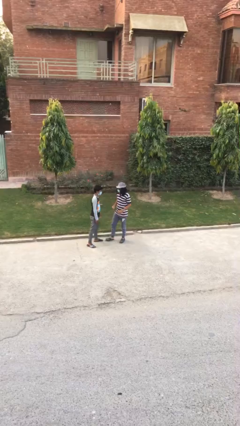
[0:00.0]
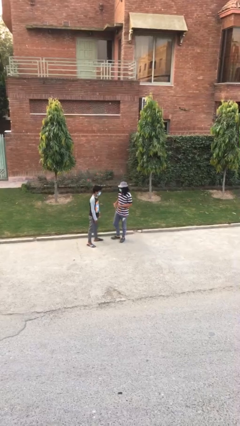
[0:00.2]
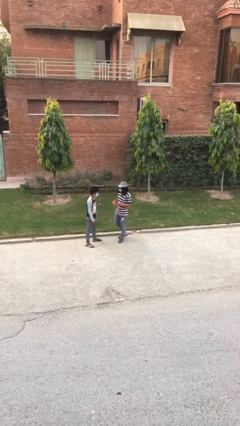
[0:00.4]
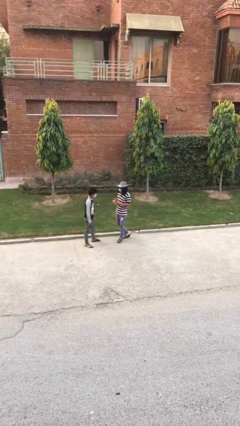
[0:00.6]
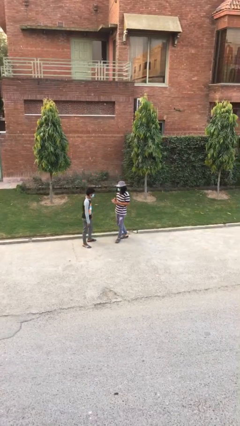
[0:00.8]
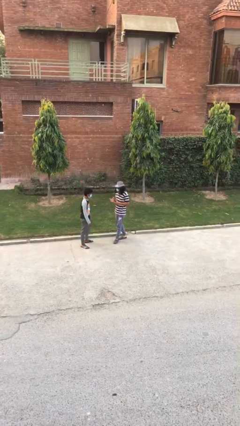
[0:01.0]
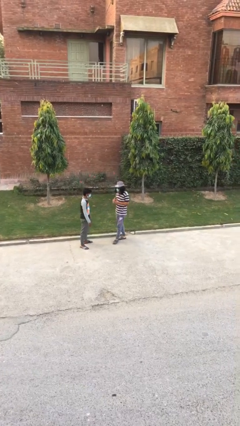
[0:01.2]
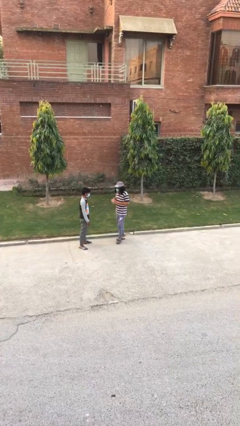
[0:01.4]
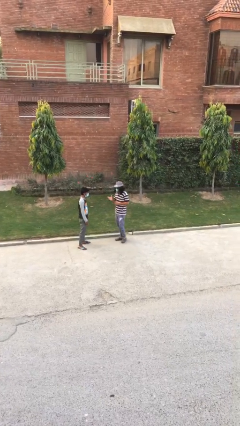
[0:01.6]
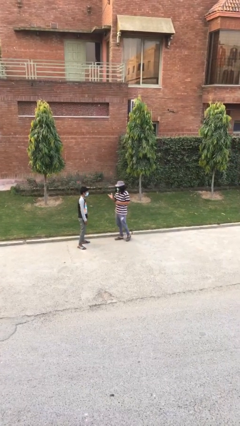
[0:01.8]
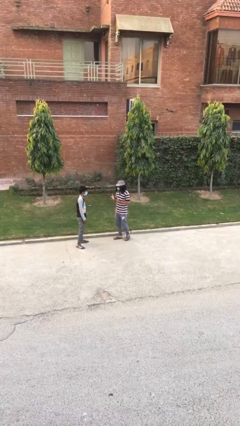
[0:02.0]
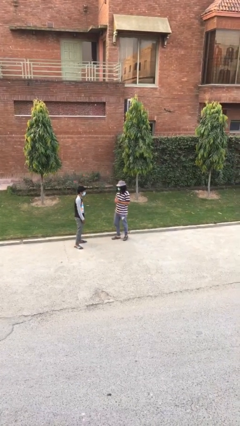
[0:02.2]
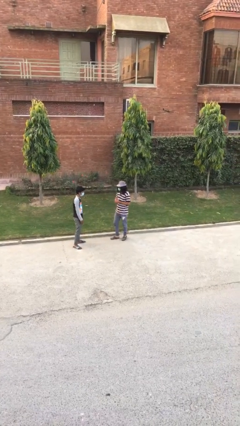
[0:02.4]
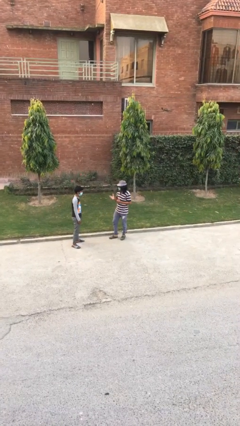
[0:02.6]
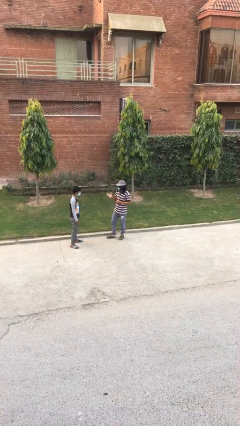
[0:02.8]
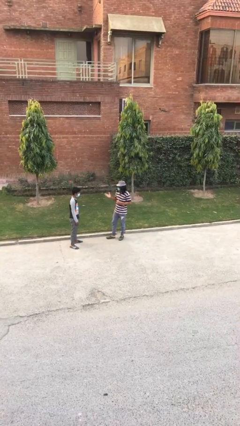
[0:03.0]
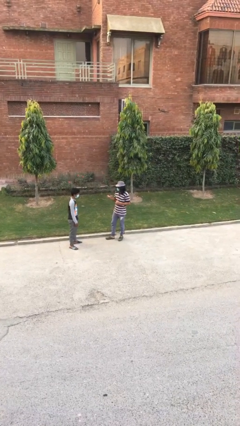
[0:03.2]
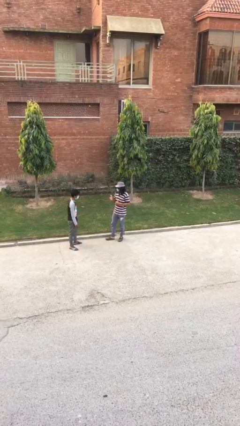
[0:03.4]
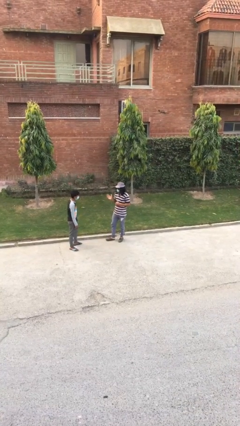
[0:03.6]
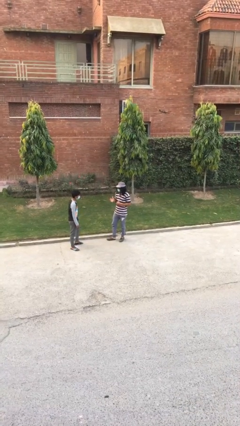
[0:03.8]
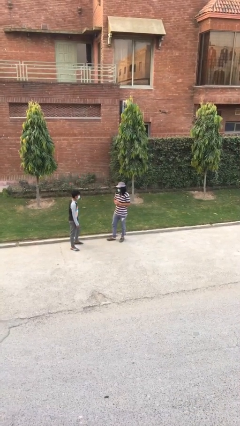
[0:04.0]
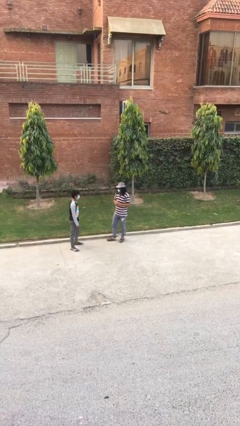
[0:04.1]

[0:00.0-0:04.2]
person talks to person

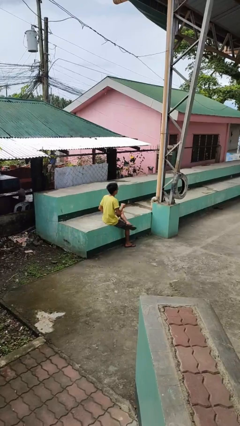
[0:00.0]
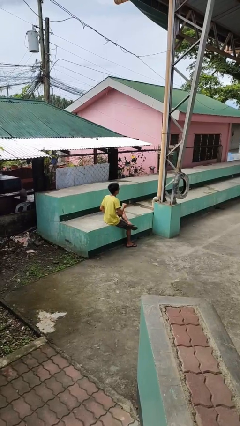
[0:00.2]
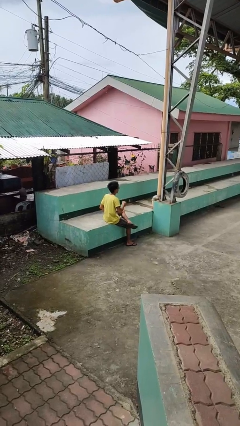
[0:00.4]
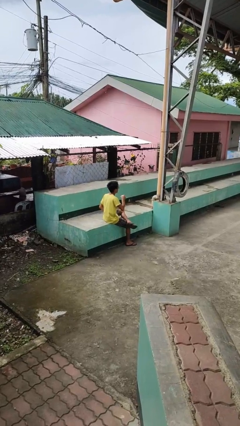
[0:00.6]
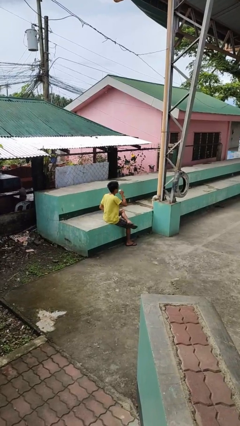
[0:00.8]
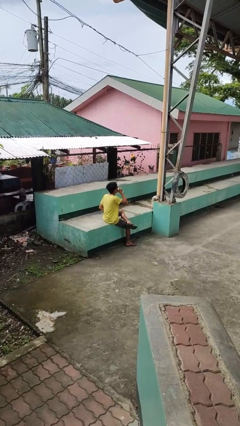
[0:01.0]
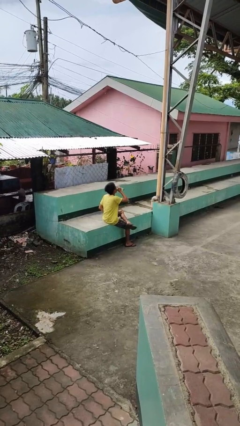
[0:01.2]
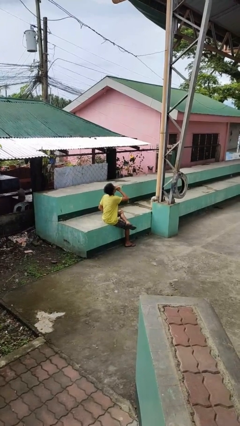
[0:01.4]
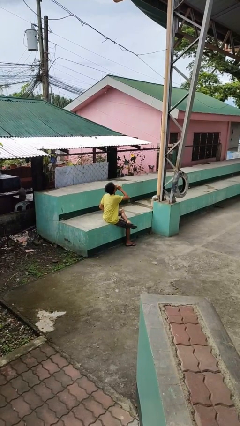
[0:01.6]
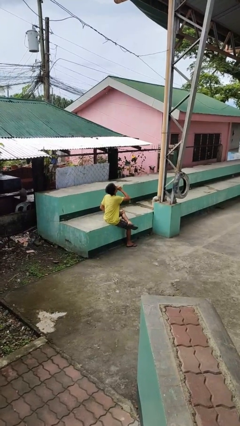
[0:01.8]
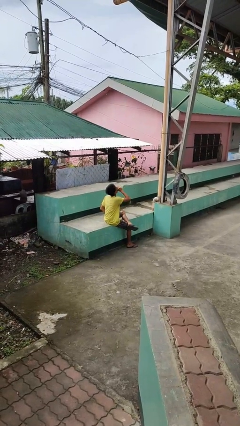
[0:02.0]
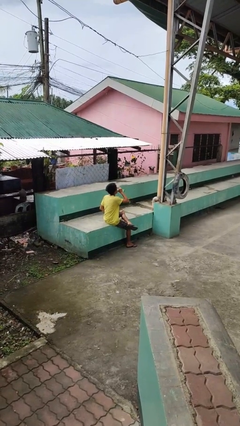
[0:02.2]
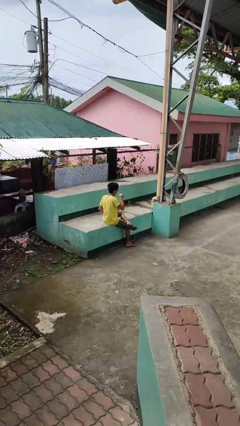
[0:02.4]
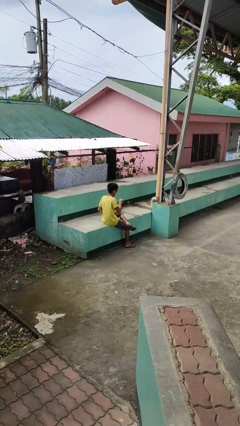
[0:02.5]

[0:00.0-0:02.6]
person drinks from bottle

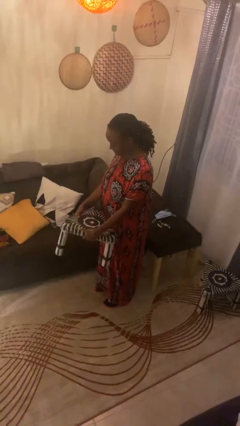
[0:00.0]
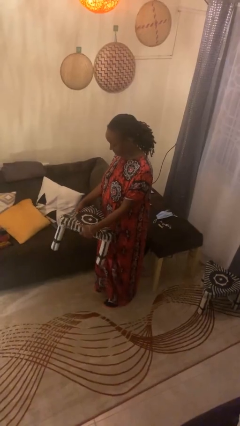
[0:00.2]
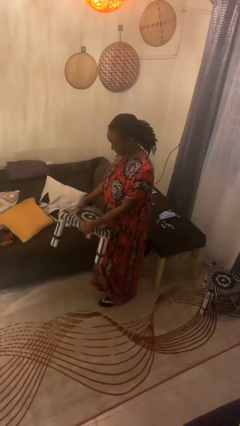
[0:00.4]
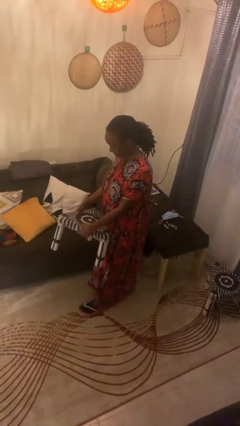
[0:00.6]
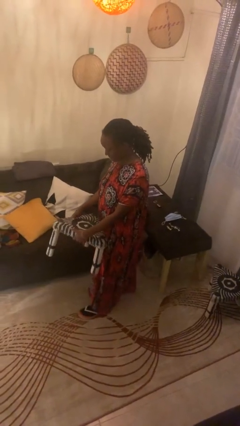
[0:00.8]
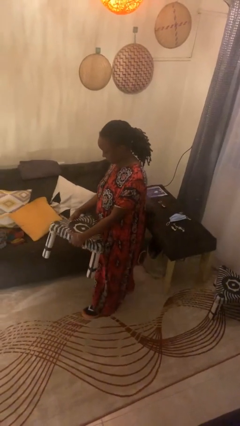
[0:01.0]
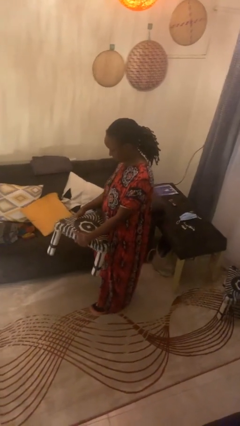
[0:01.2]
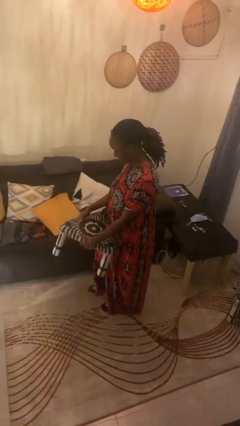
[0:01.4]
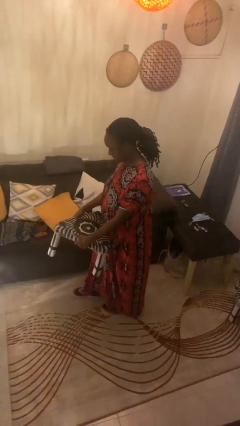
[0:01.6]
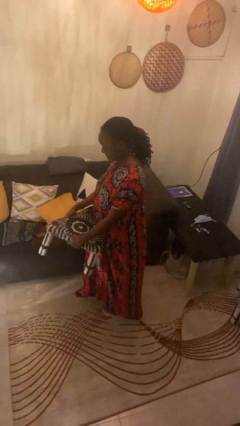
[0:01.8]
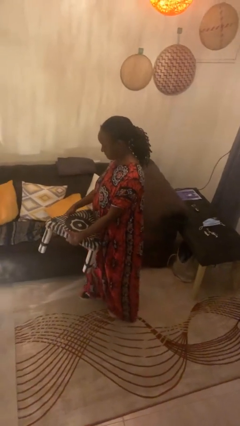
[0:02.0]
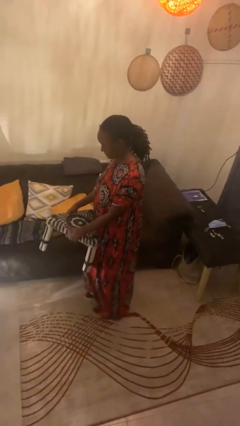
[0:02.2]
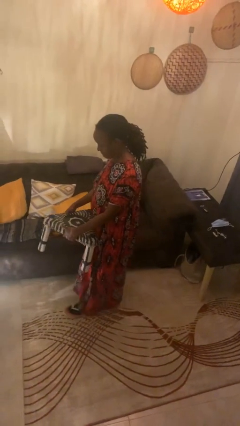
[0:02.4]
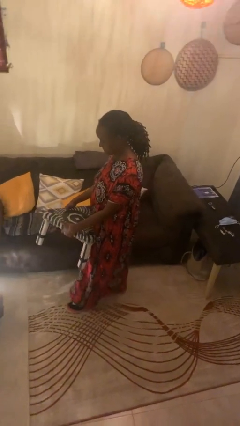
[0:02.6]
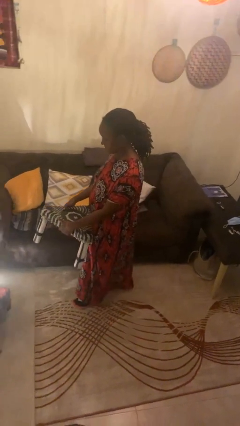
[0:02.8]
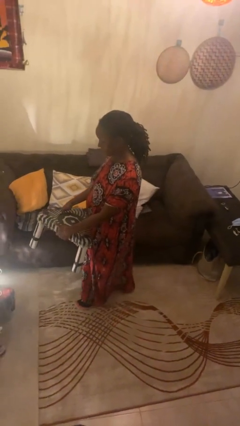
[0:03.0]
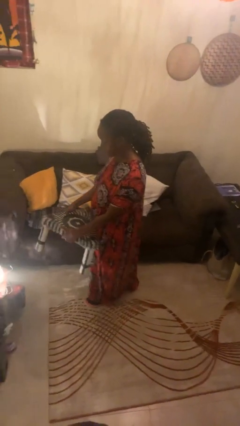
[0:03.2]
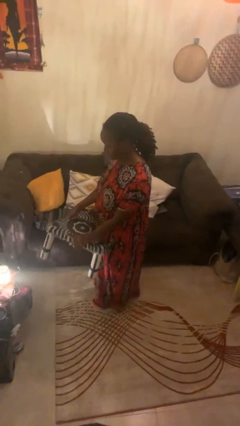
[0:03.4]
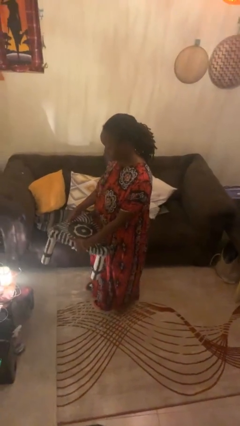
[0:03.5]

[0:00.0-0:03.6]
person carries furniture

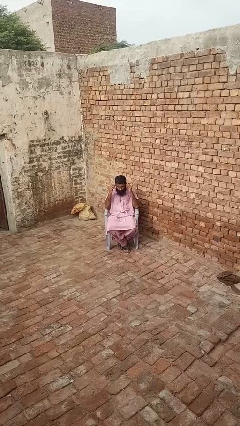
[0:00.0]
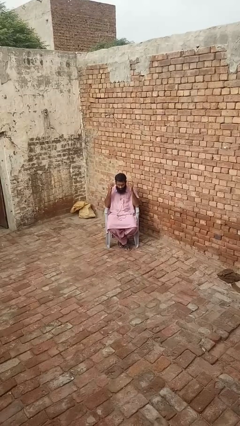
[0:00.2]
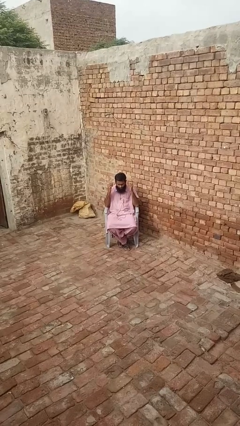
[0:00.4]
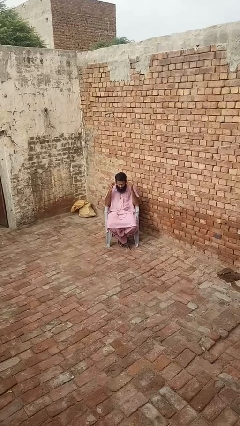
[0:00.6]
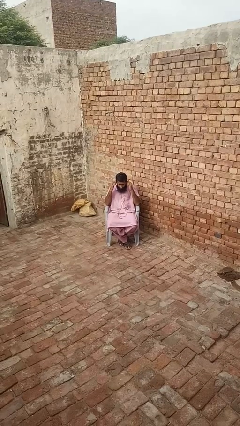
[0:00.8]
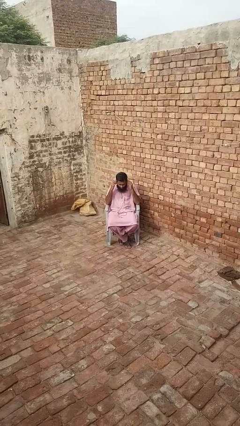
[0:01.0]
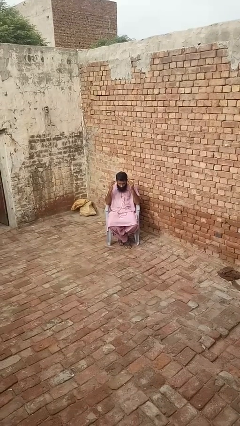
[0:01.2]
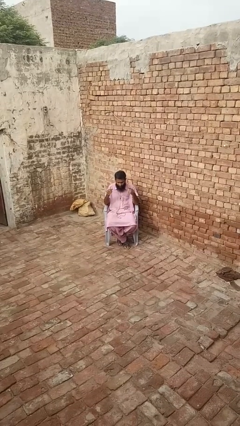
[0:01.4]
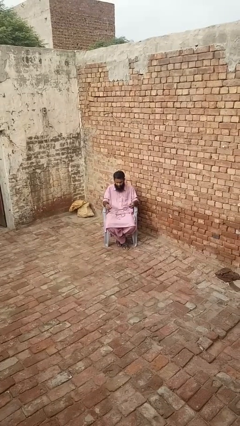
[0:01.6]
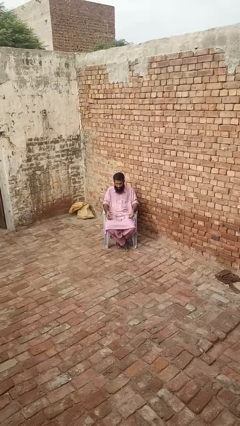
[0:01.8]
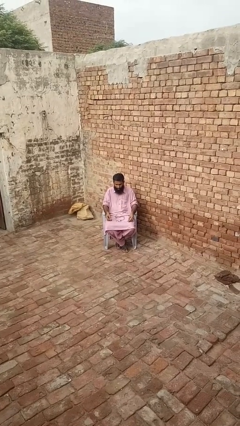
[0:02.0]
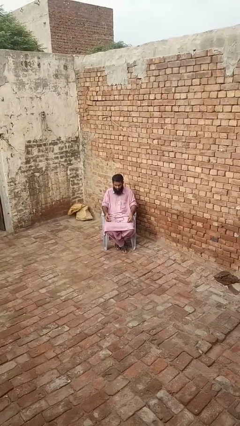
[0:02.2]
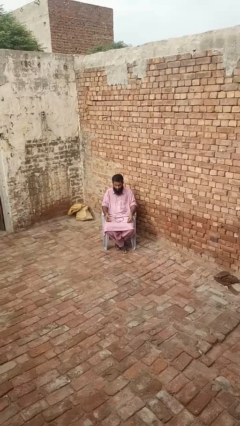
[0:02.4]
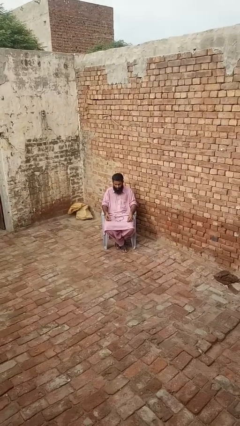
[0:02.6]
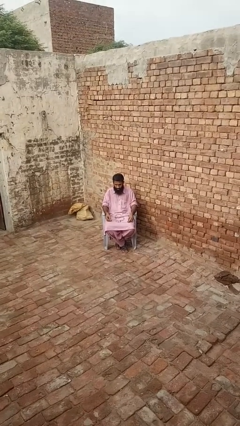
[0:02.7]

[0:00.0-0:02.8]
person takes off headphones

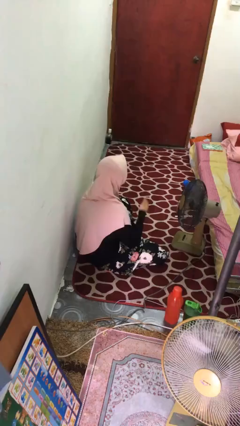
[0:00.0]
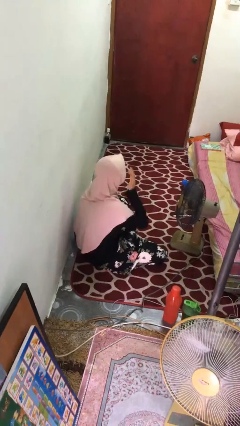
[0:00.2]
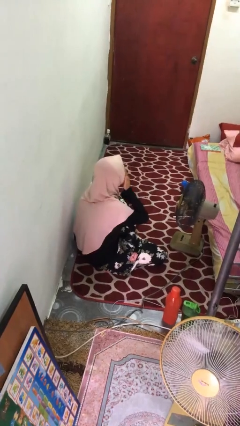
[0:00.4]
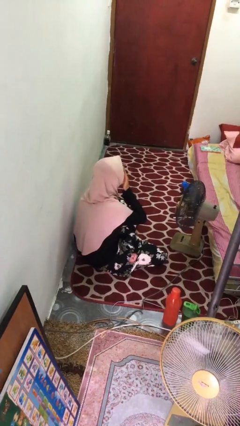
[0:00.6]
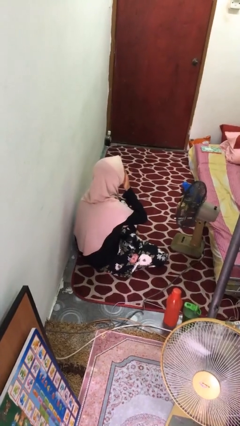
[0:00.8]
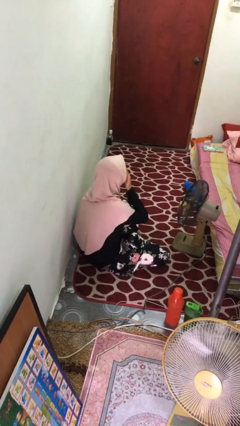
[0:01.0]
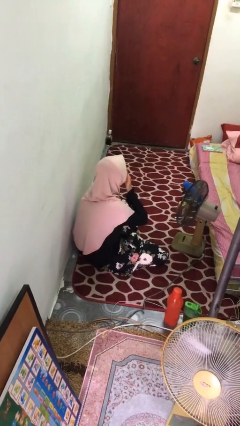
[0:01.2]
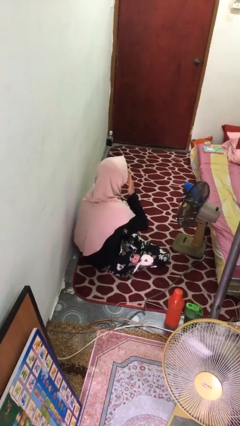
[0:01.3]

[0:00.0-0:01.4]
person yawns

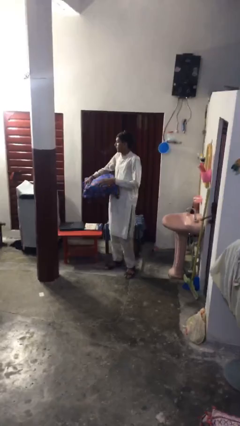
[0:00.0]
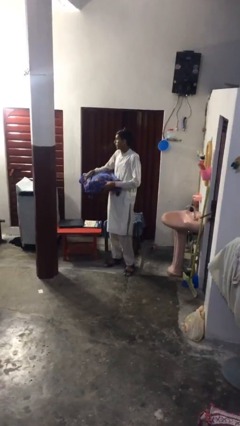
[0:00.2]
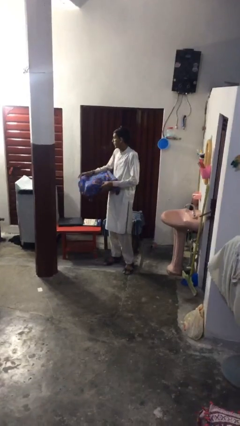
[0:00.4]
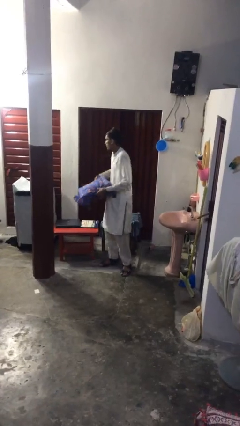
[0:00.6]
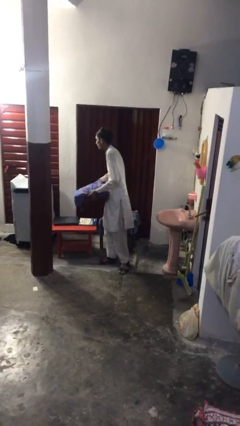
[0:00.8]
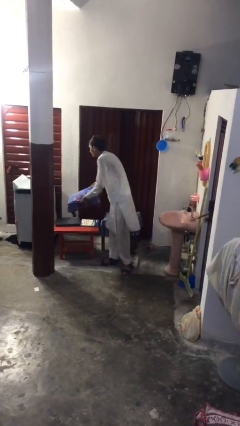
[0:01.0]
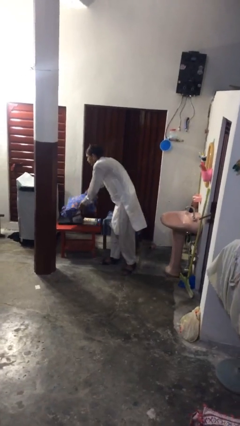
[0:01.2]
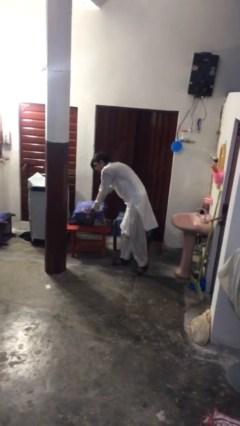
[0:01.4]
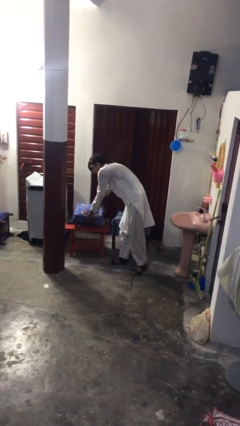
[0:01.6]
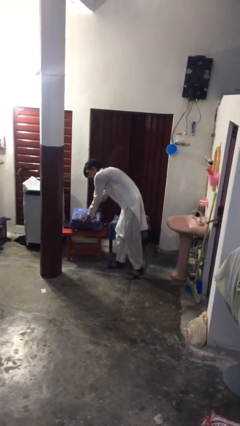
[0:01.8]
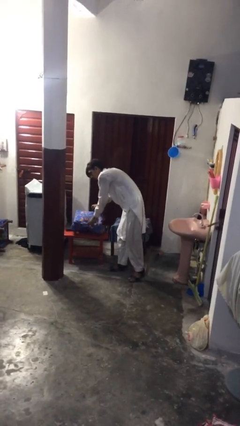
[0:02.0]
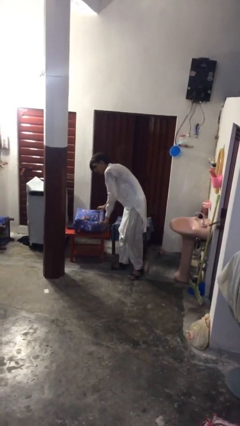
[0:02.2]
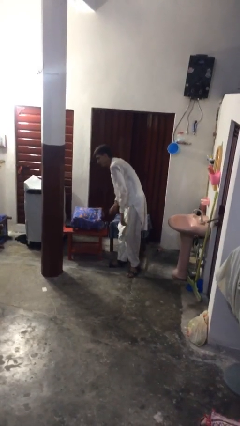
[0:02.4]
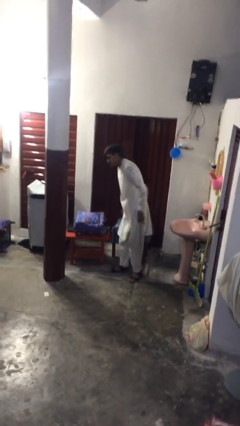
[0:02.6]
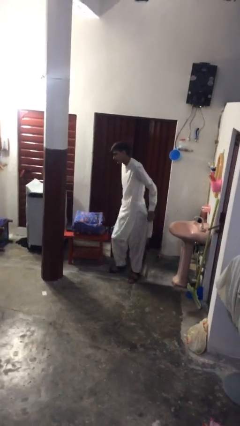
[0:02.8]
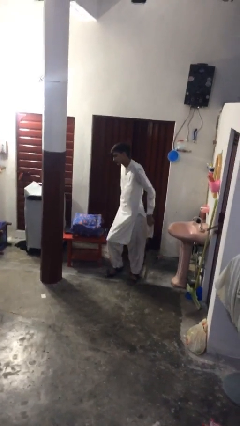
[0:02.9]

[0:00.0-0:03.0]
person puts down object on table
